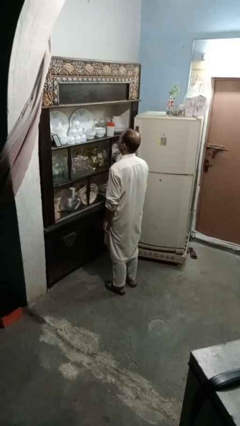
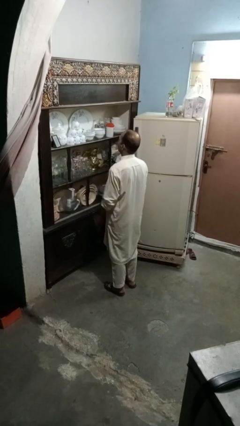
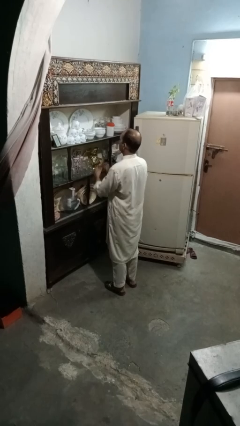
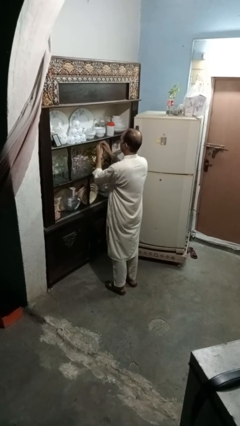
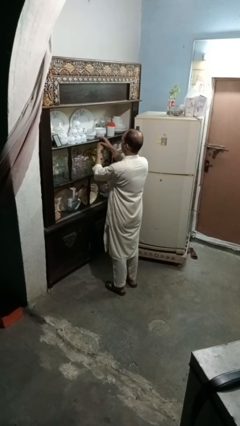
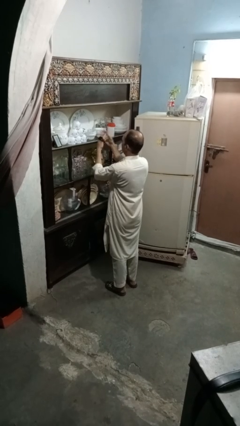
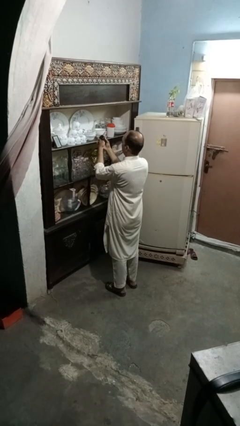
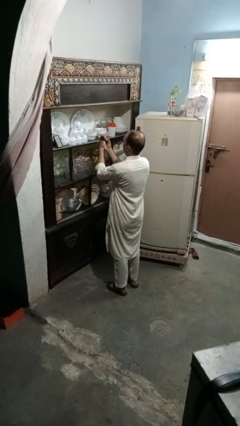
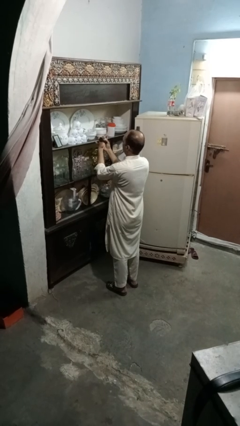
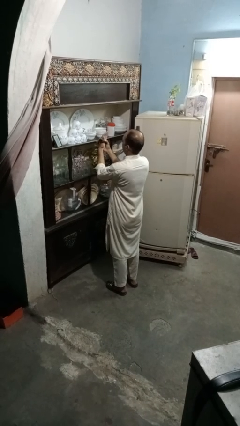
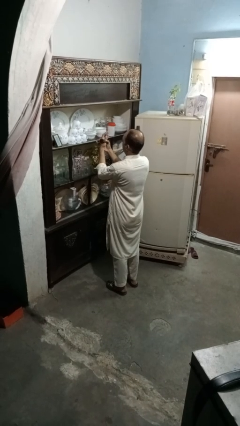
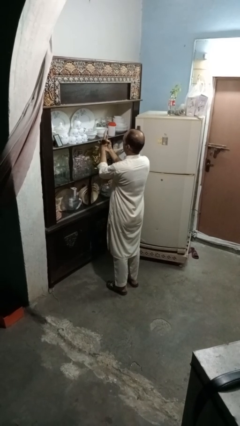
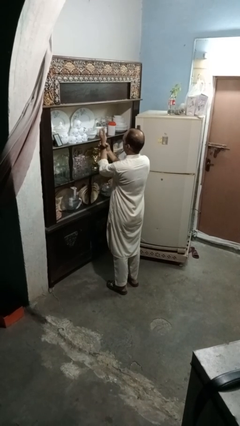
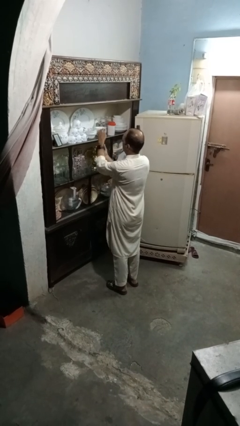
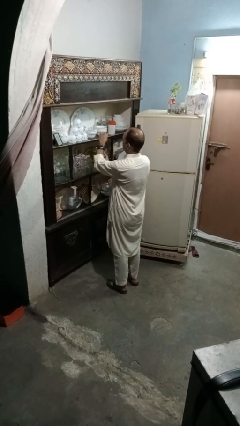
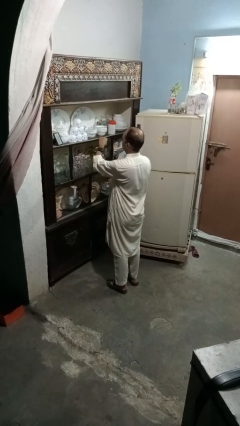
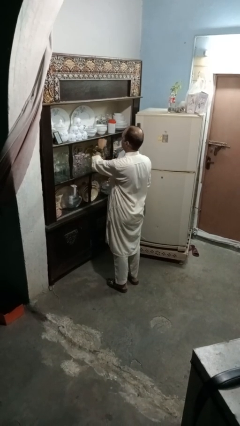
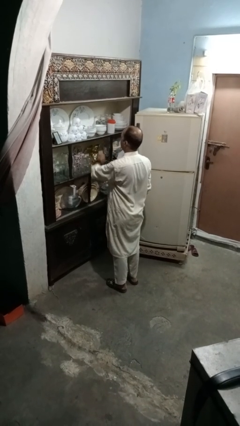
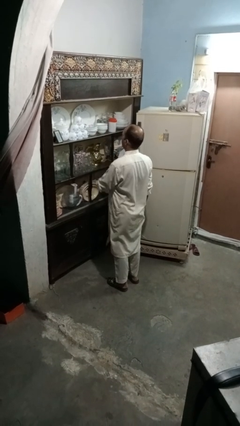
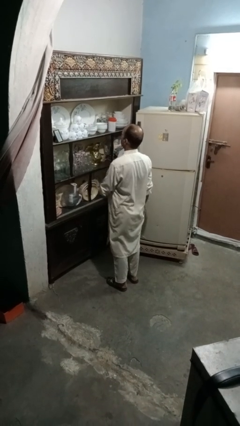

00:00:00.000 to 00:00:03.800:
person puts on wristwatch

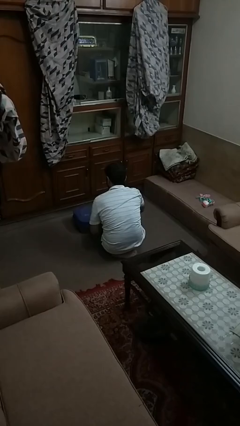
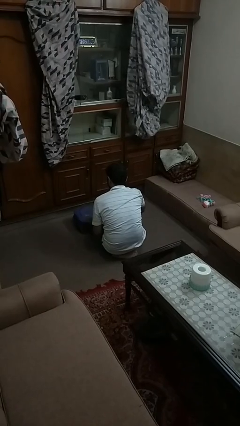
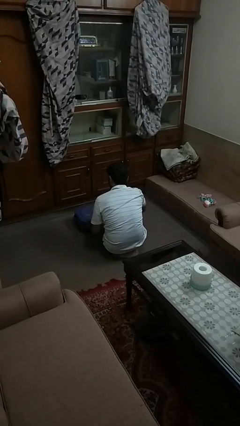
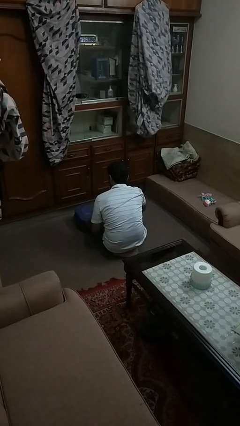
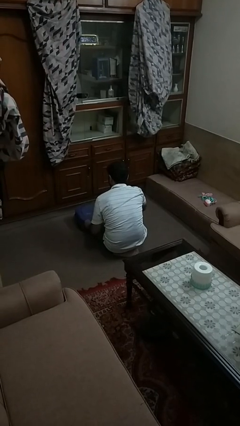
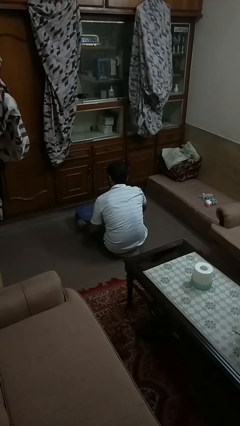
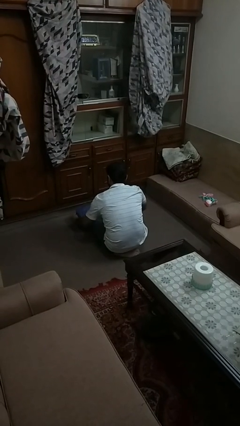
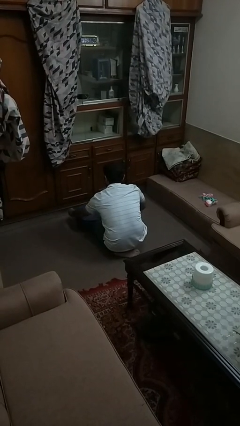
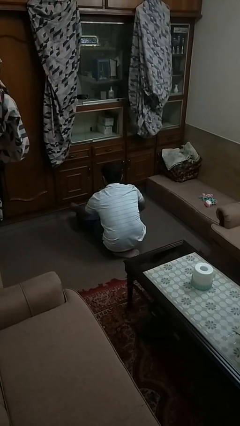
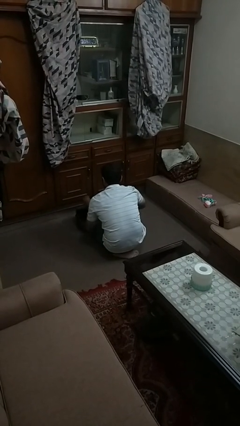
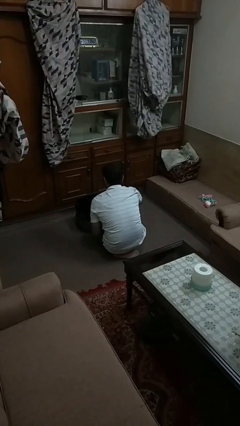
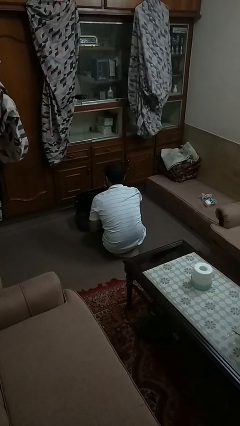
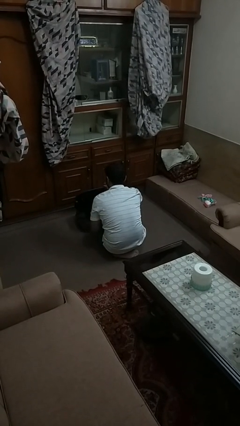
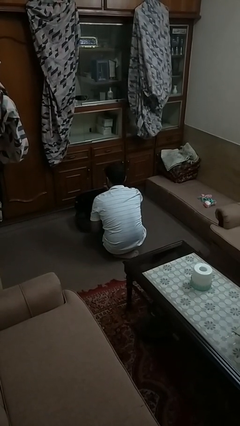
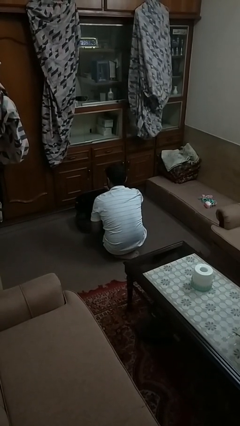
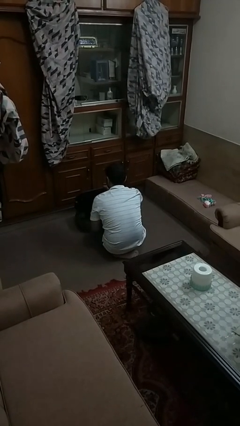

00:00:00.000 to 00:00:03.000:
person opens suitcase

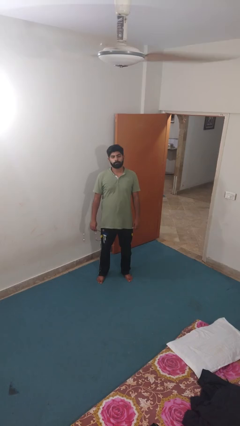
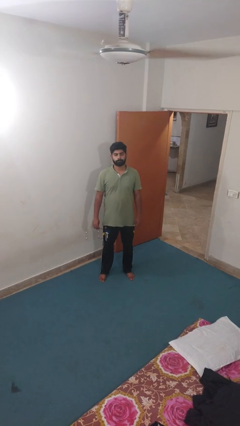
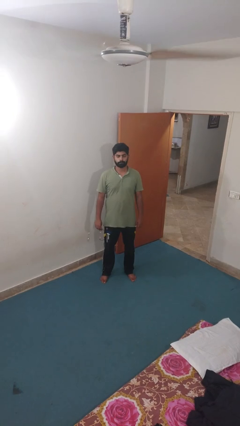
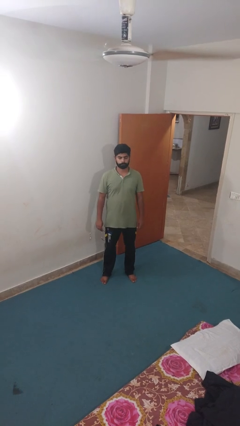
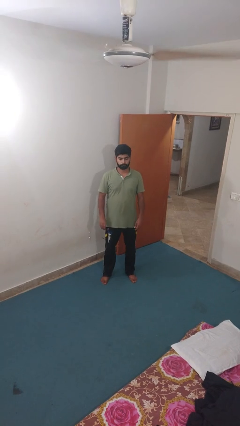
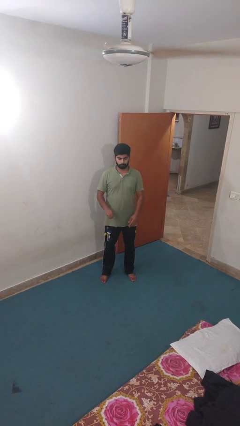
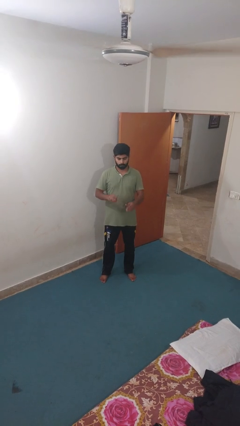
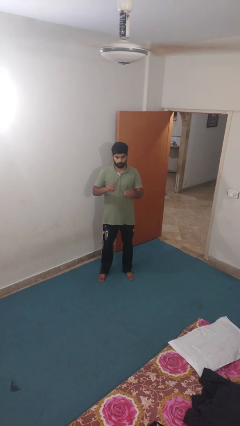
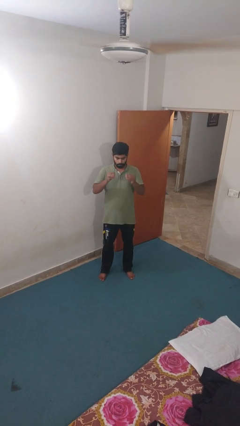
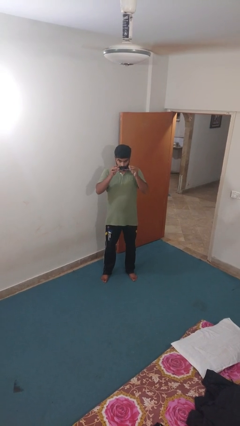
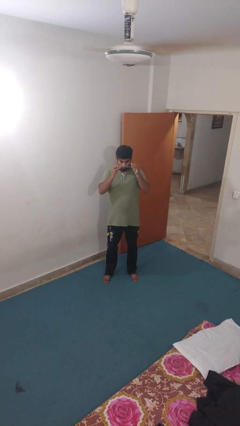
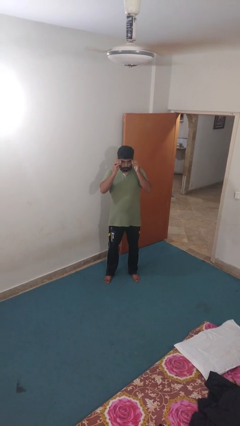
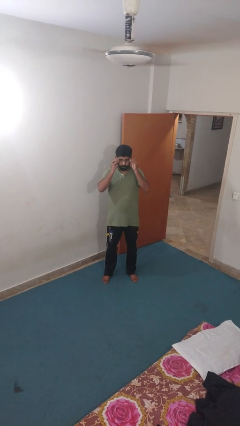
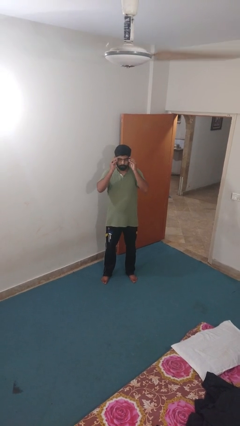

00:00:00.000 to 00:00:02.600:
person puts on glasses

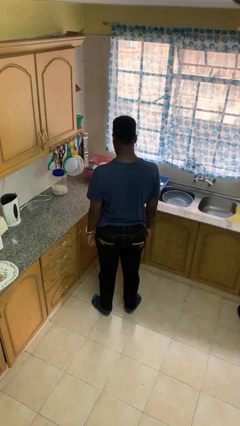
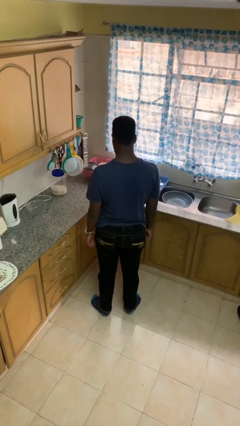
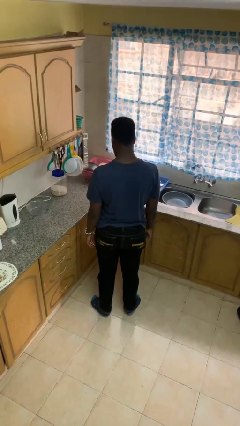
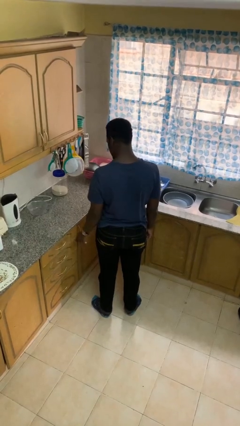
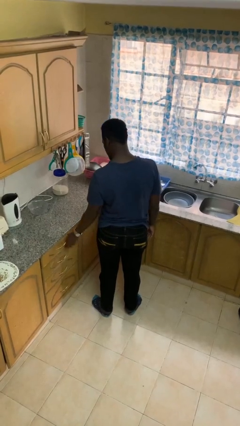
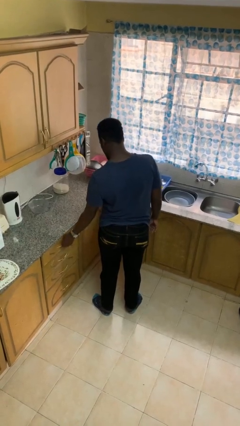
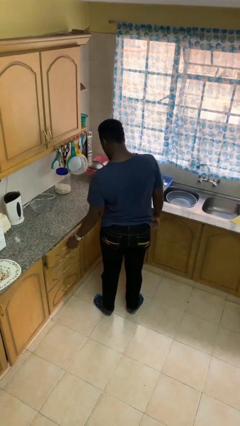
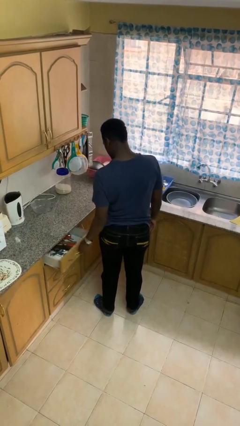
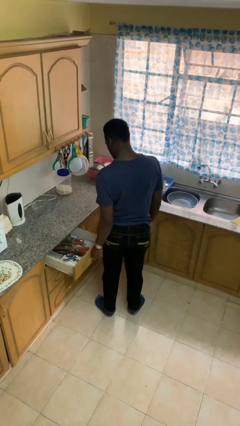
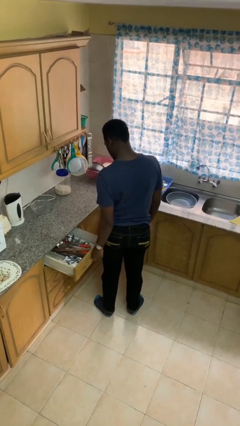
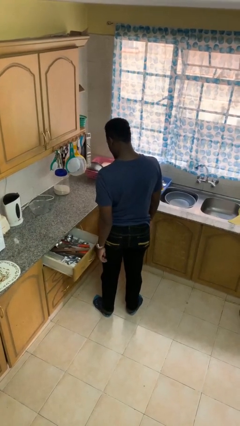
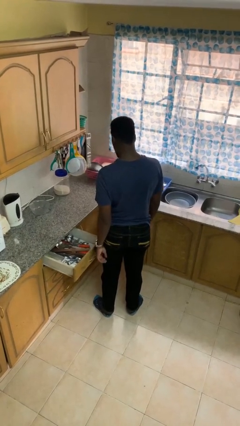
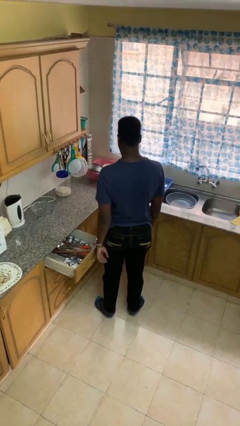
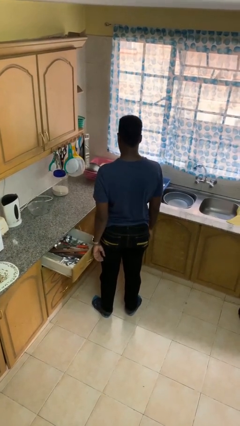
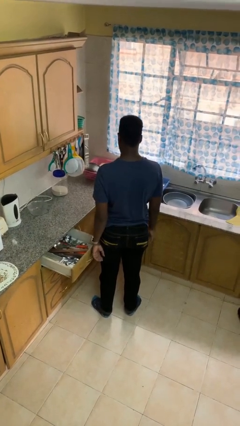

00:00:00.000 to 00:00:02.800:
person opens kitchen drawer

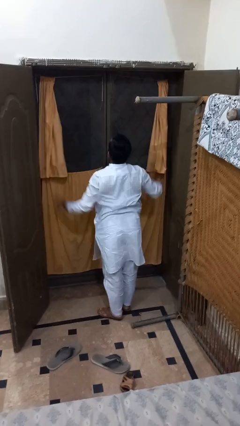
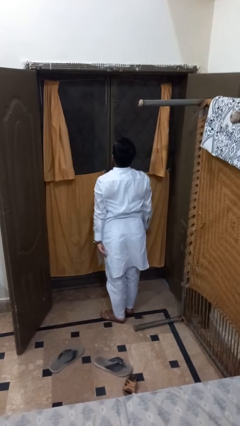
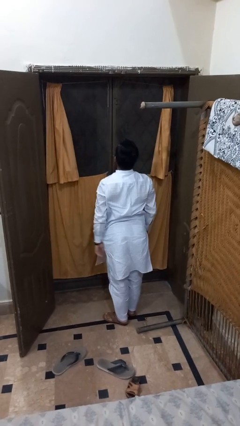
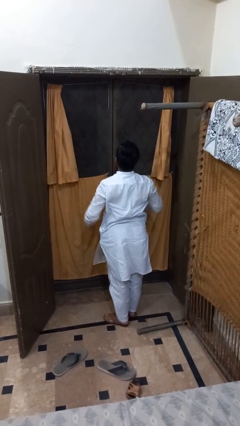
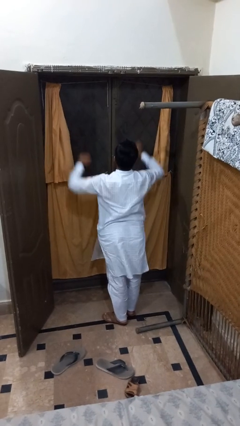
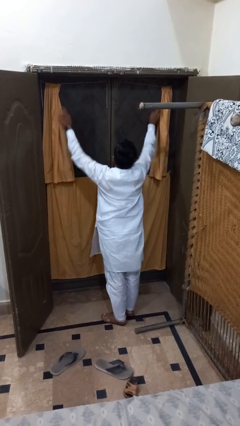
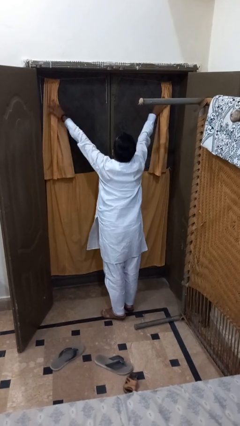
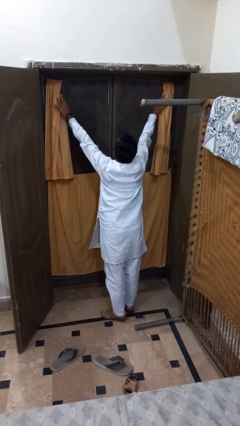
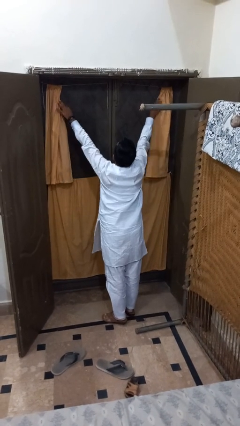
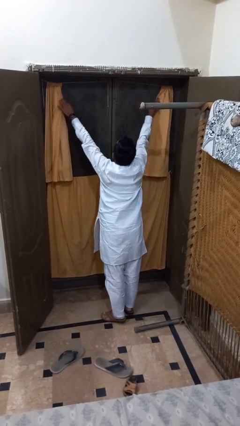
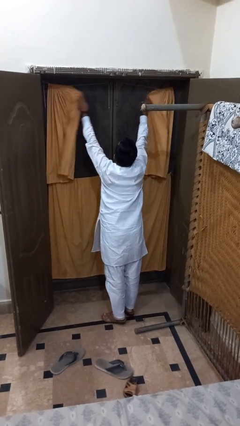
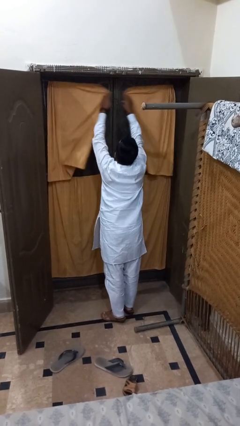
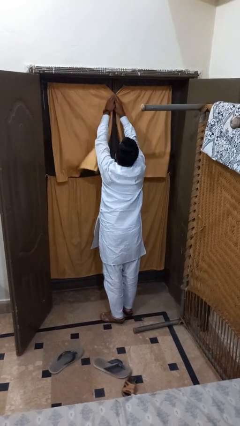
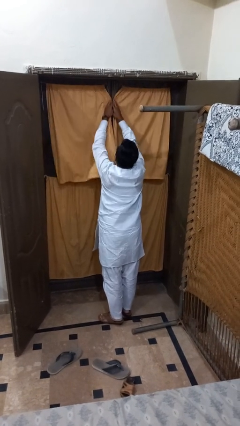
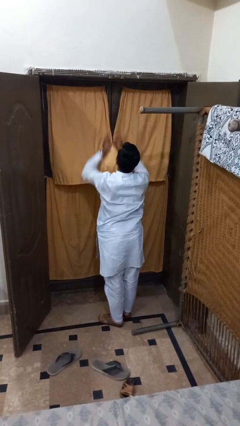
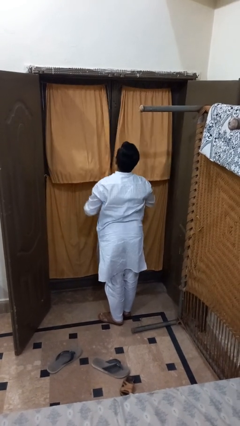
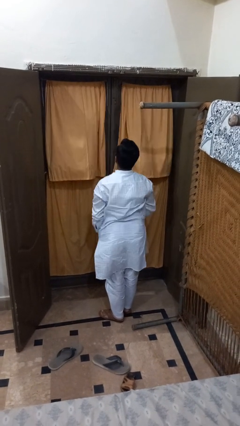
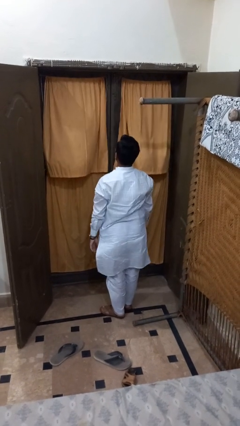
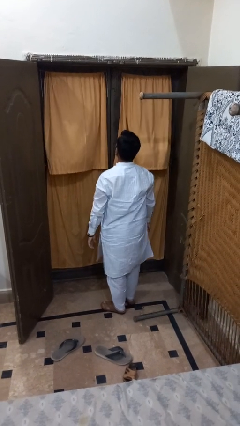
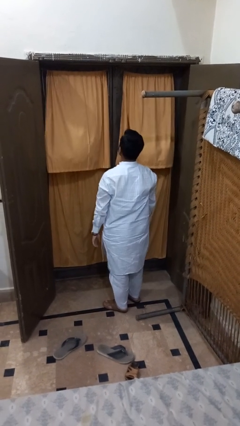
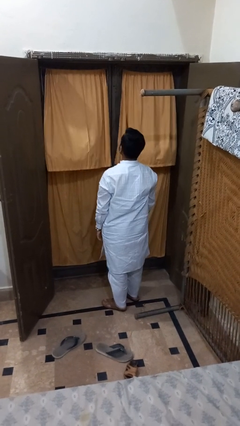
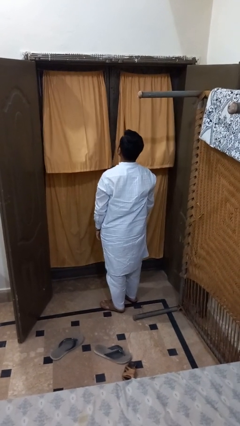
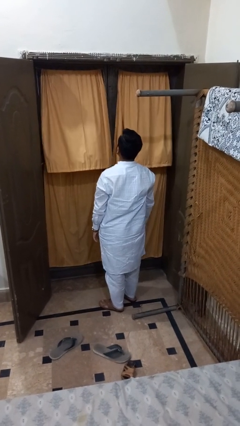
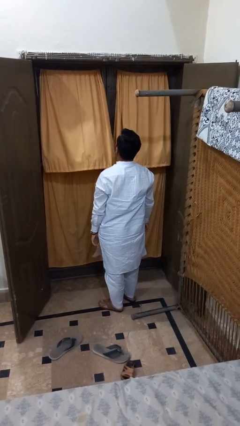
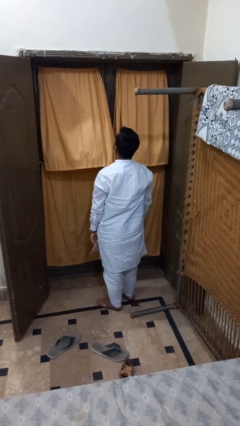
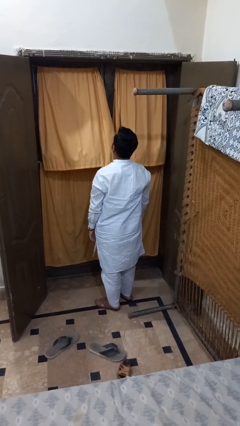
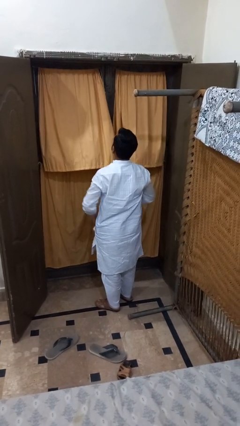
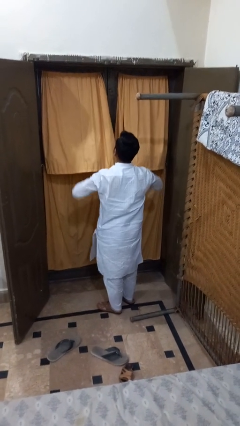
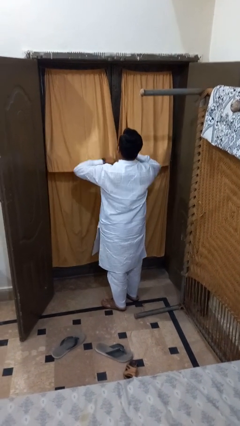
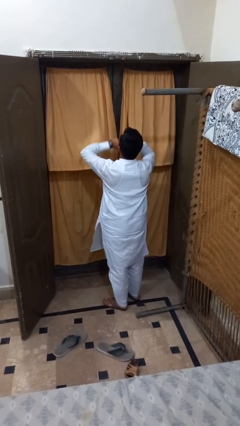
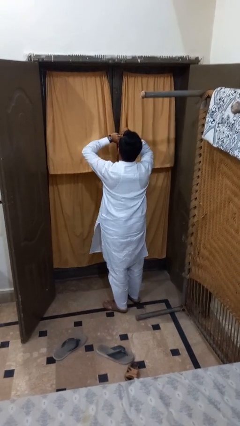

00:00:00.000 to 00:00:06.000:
person closes curtains
